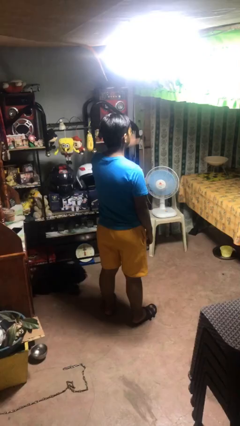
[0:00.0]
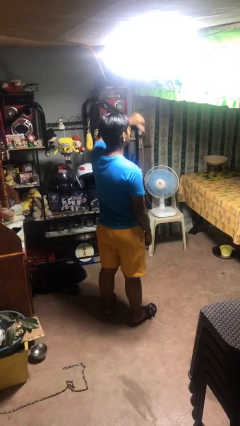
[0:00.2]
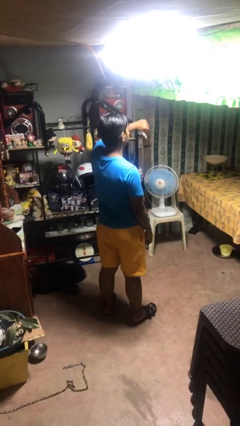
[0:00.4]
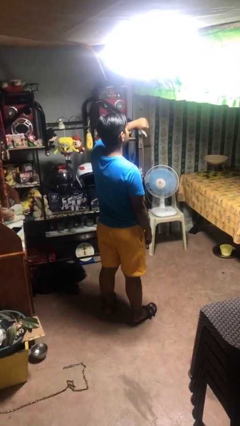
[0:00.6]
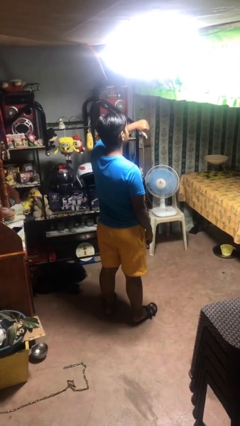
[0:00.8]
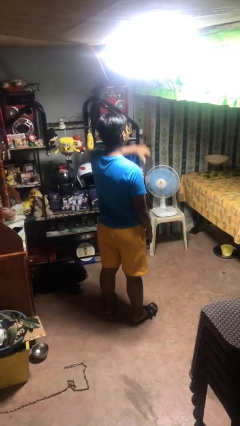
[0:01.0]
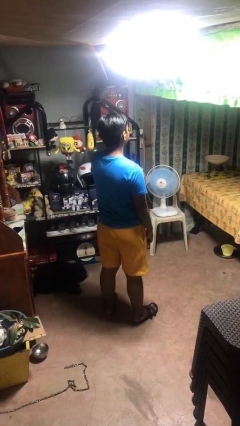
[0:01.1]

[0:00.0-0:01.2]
person gestures thumbs down

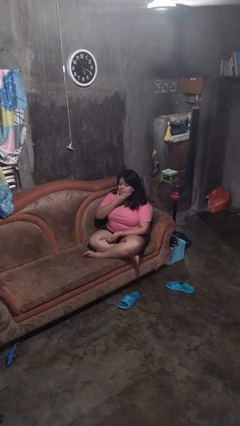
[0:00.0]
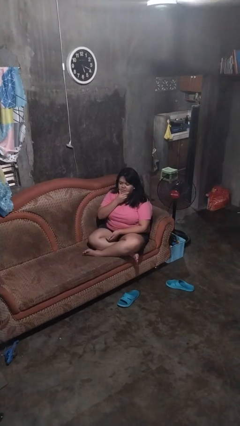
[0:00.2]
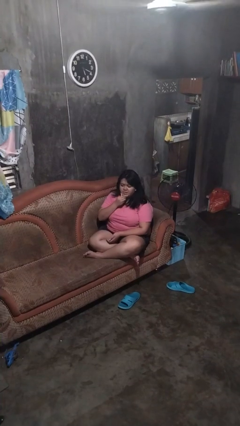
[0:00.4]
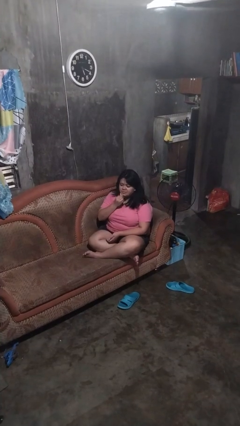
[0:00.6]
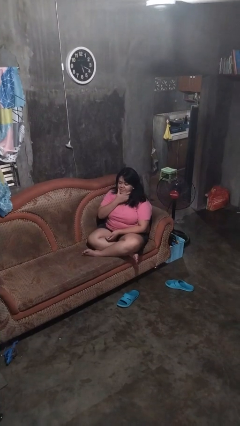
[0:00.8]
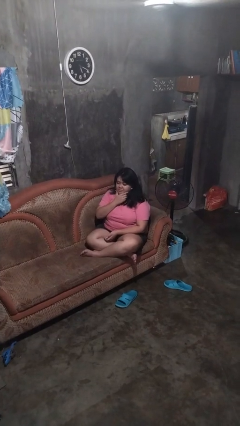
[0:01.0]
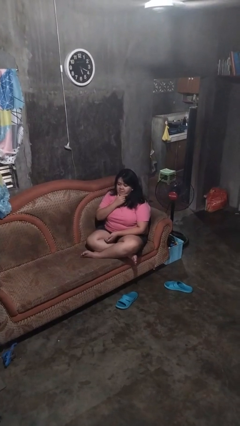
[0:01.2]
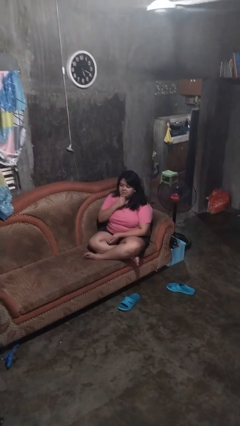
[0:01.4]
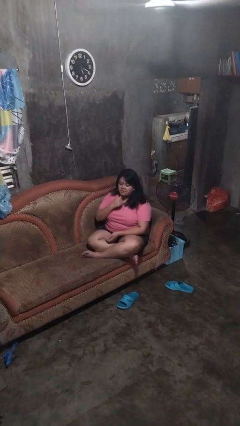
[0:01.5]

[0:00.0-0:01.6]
person strokes chin

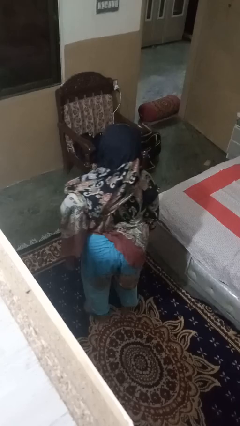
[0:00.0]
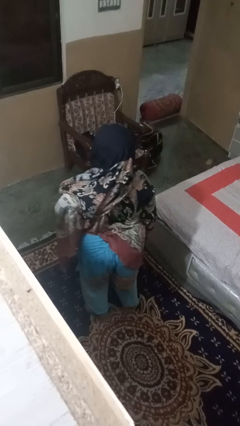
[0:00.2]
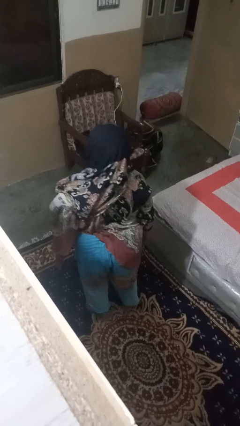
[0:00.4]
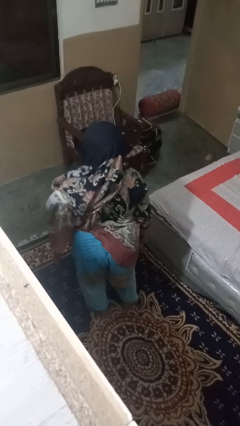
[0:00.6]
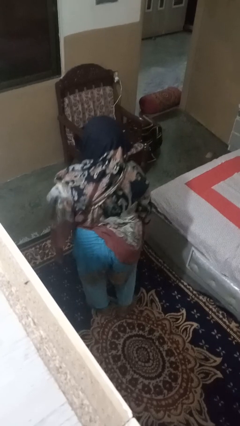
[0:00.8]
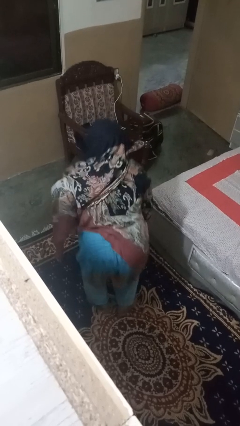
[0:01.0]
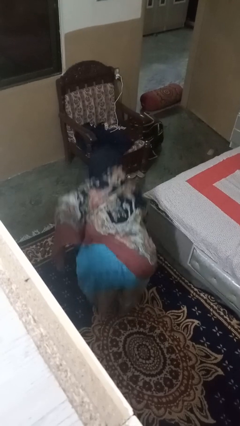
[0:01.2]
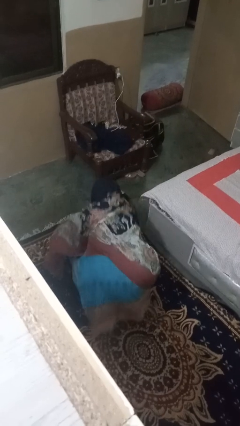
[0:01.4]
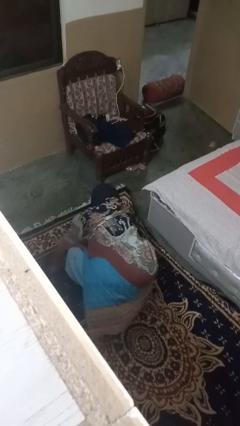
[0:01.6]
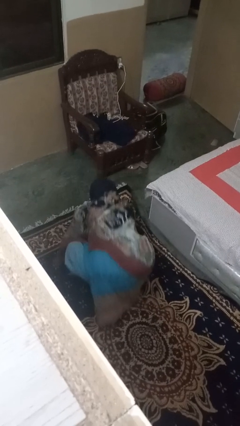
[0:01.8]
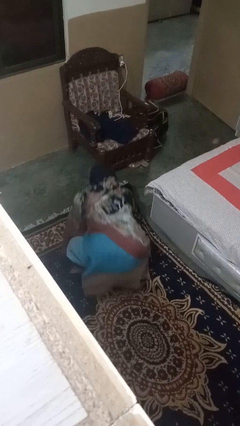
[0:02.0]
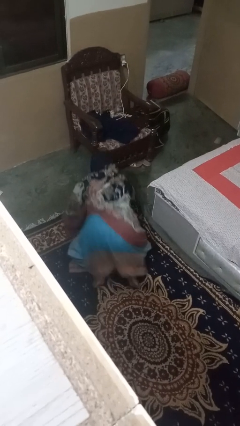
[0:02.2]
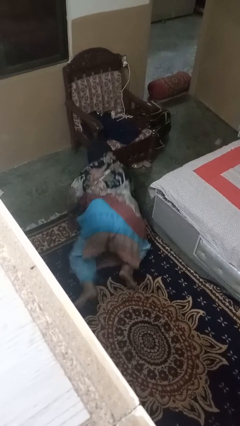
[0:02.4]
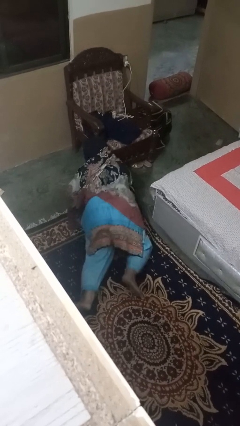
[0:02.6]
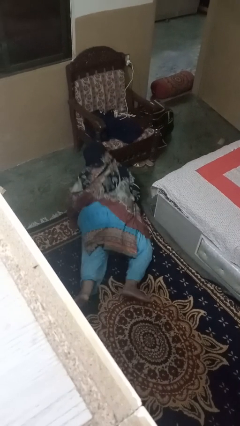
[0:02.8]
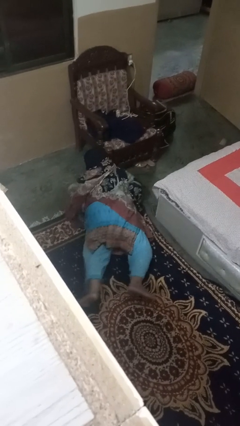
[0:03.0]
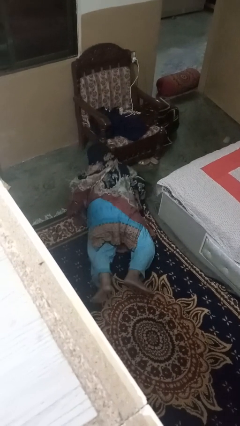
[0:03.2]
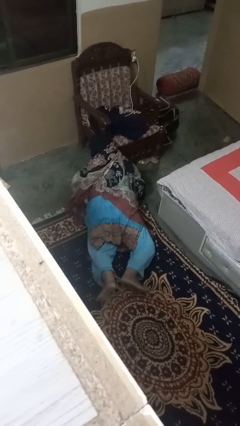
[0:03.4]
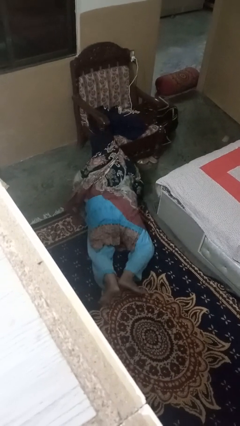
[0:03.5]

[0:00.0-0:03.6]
person exercises with pushup

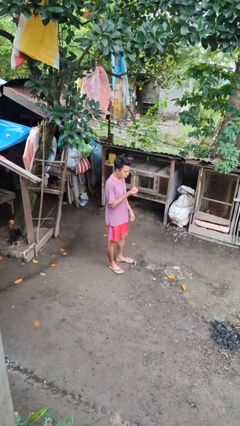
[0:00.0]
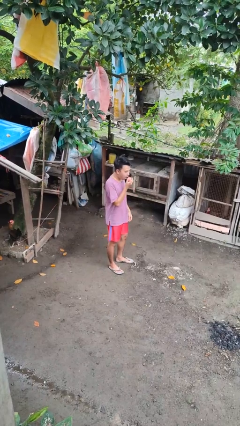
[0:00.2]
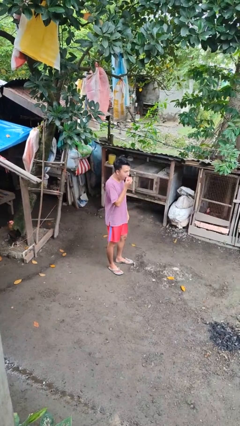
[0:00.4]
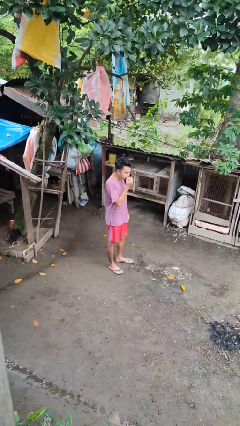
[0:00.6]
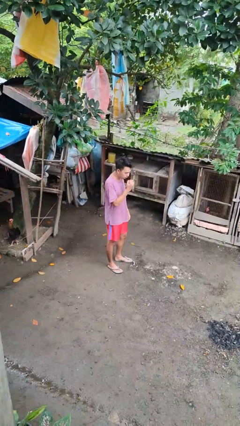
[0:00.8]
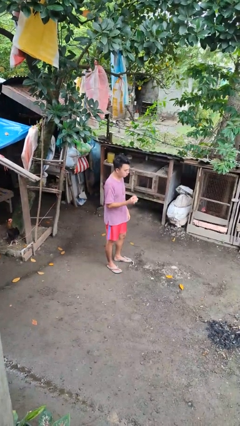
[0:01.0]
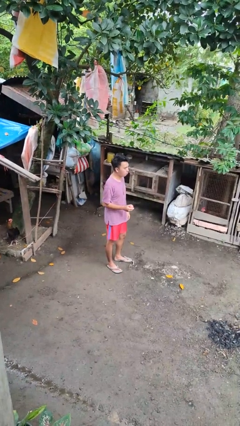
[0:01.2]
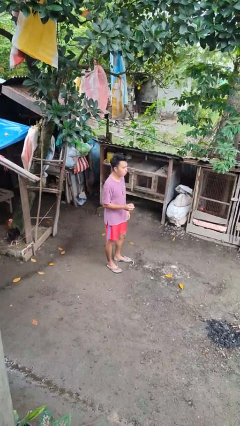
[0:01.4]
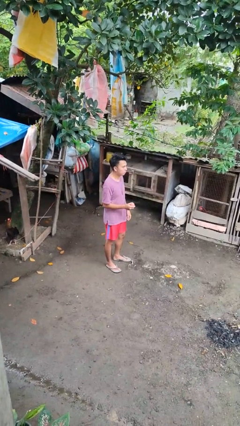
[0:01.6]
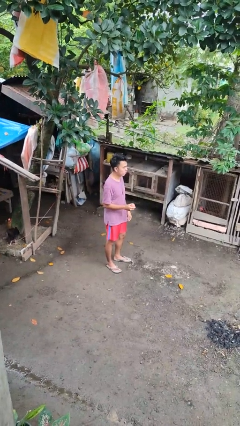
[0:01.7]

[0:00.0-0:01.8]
person eats apple

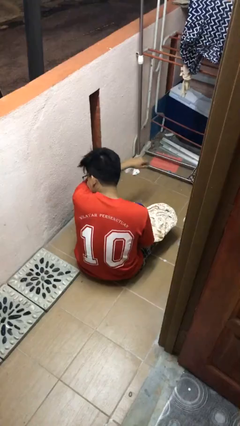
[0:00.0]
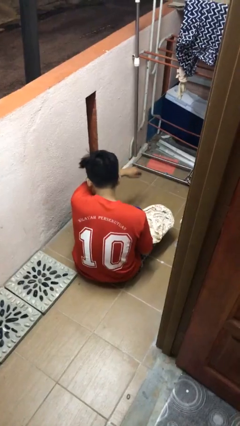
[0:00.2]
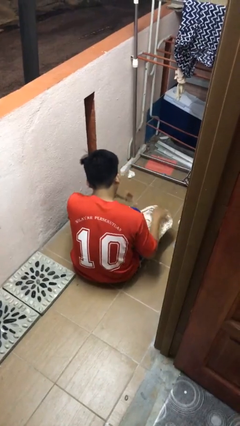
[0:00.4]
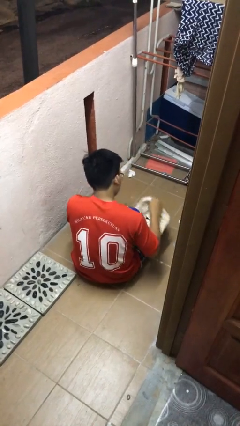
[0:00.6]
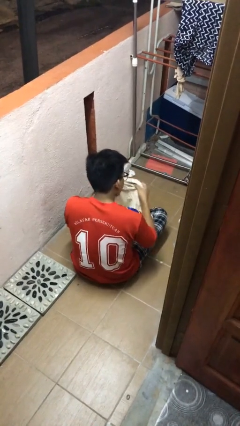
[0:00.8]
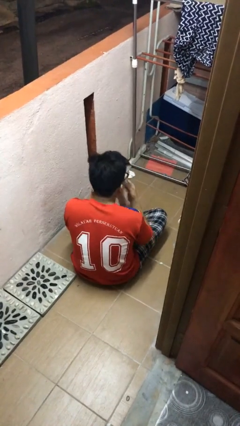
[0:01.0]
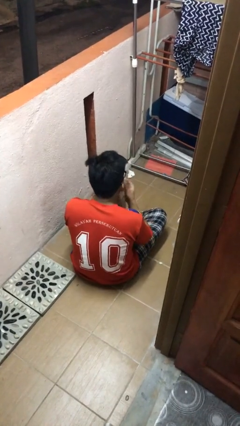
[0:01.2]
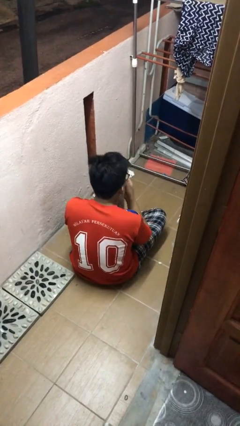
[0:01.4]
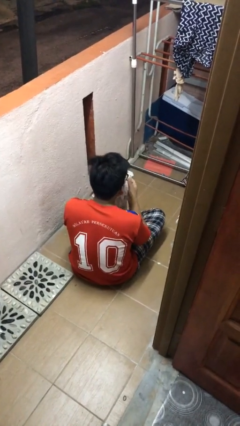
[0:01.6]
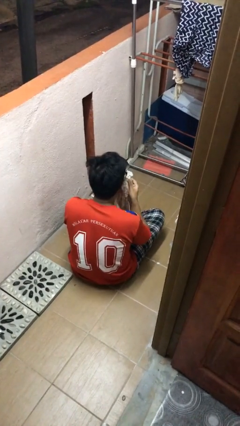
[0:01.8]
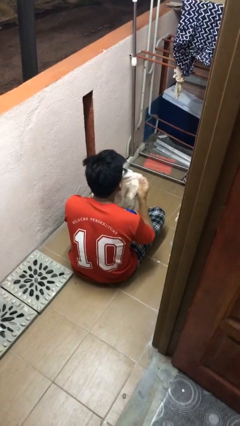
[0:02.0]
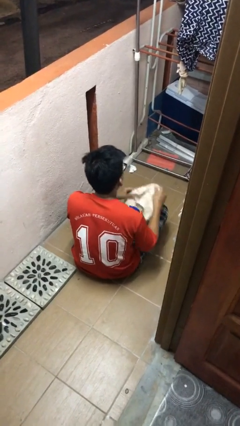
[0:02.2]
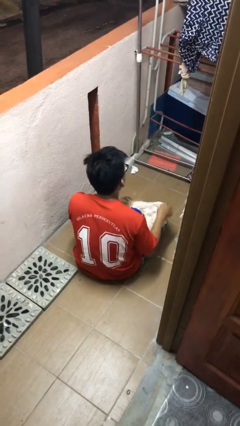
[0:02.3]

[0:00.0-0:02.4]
person wipes mouth with napkin

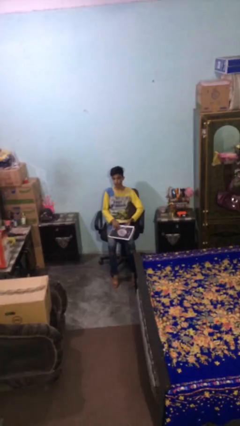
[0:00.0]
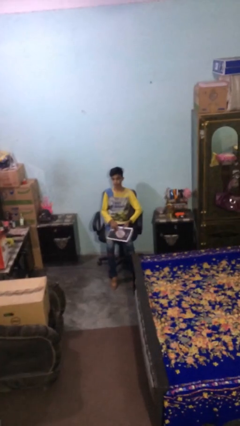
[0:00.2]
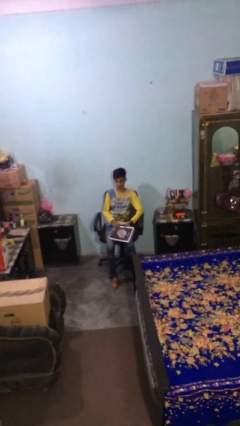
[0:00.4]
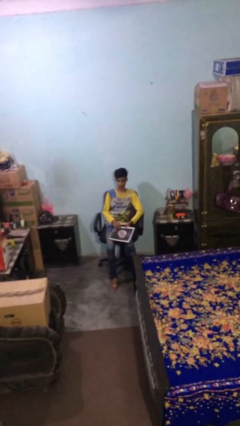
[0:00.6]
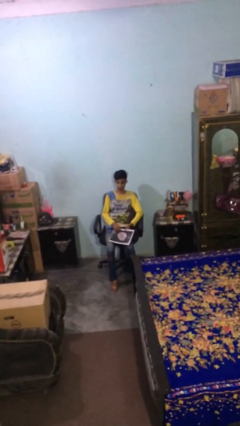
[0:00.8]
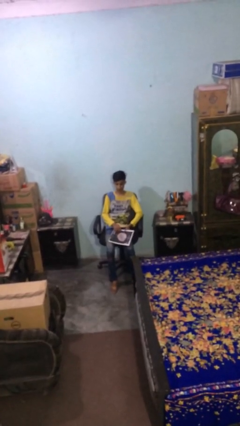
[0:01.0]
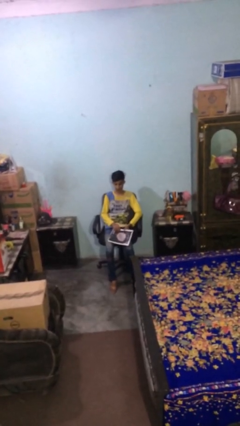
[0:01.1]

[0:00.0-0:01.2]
person sits down

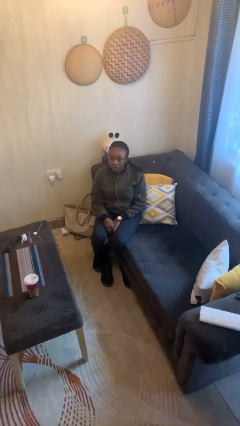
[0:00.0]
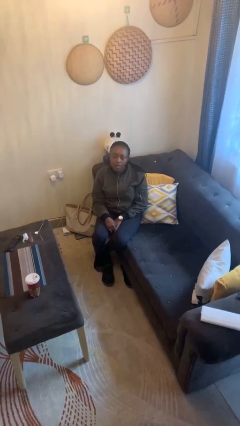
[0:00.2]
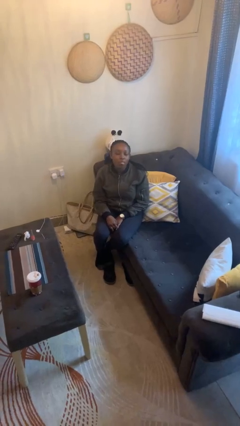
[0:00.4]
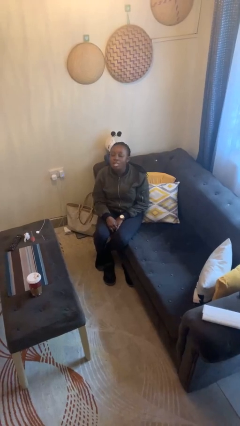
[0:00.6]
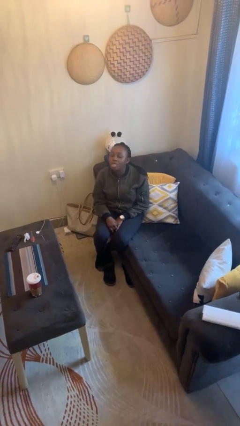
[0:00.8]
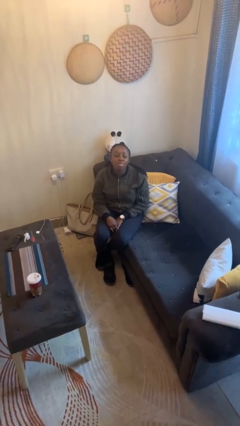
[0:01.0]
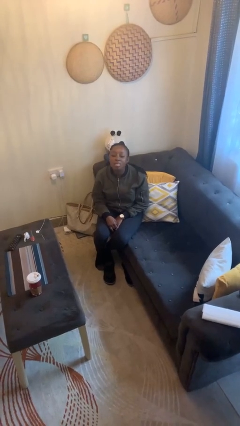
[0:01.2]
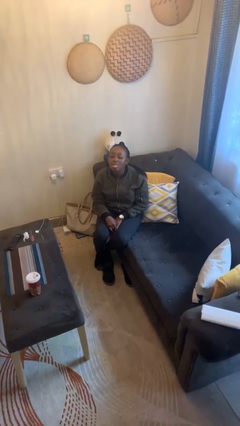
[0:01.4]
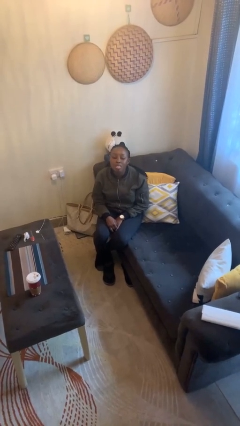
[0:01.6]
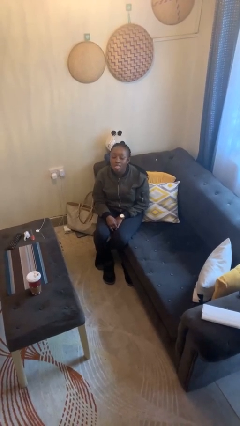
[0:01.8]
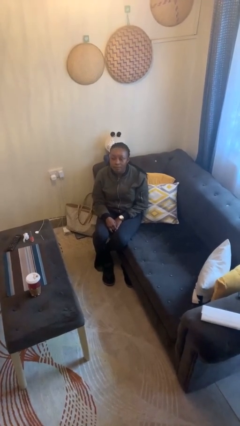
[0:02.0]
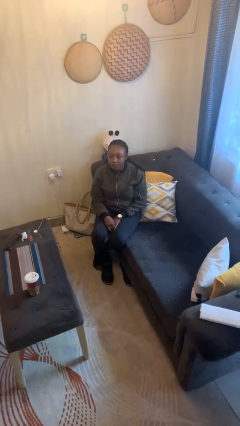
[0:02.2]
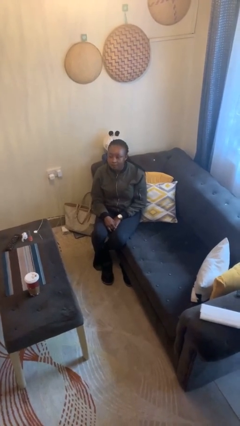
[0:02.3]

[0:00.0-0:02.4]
person sticks out tongue

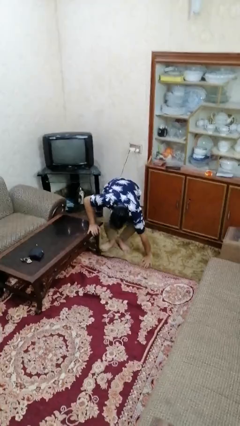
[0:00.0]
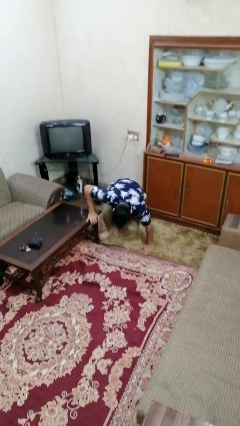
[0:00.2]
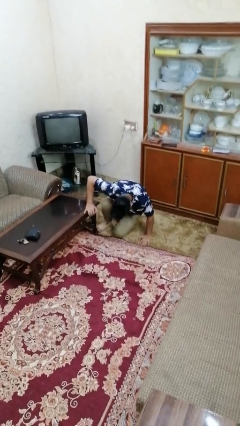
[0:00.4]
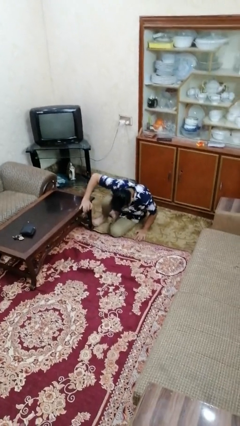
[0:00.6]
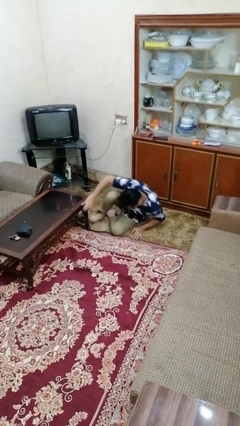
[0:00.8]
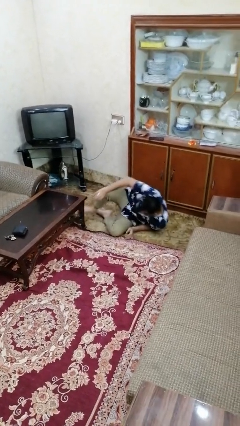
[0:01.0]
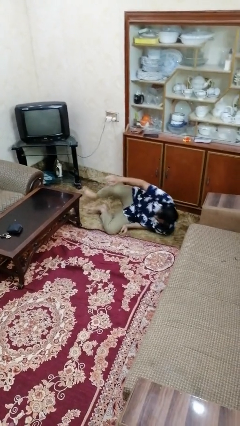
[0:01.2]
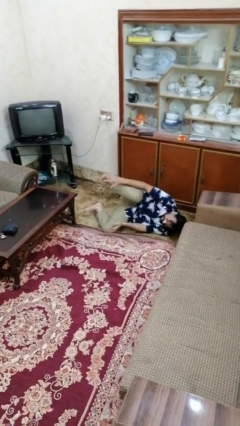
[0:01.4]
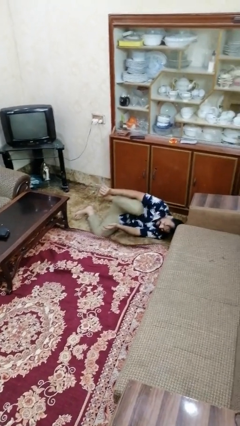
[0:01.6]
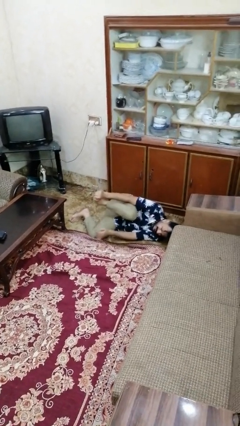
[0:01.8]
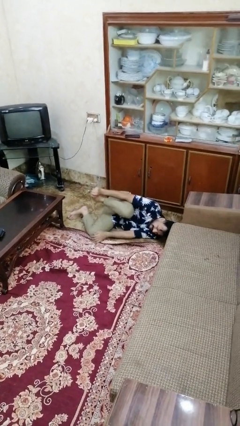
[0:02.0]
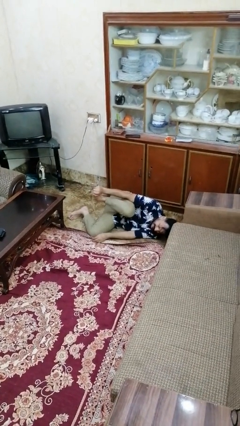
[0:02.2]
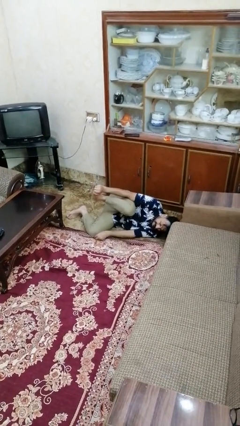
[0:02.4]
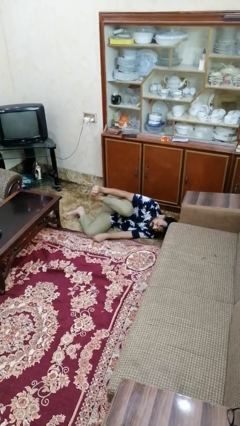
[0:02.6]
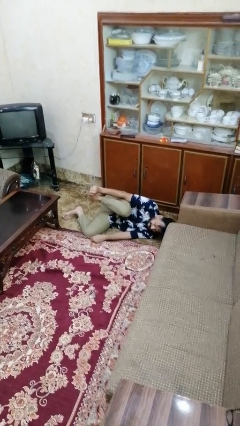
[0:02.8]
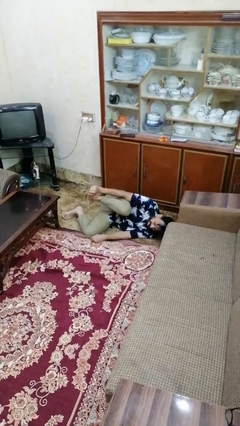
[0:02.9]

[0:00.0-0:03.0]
person lies down on floor
